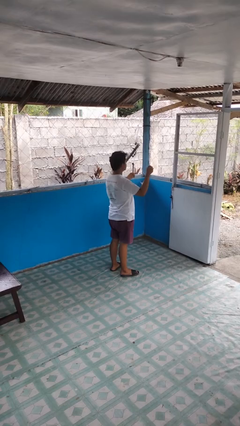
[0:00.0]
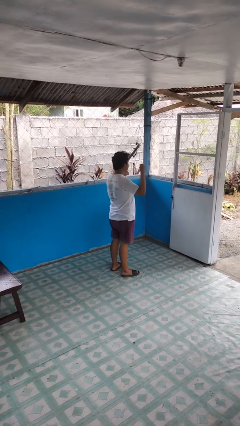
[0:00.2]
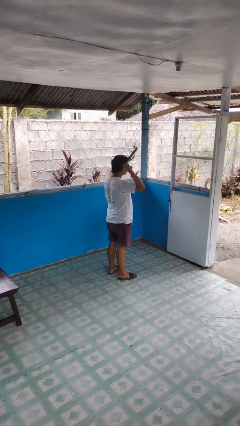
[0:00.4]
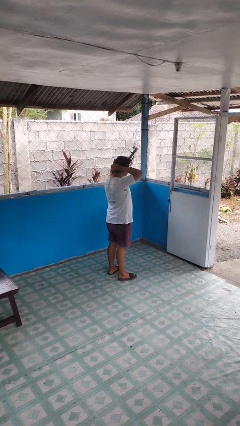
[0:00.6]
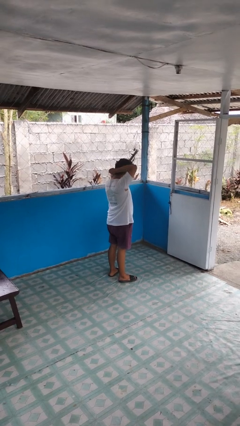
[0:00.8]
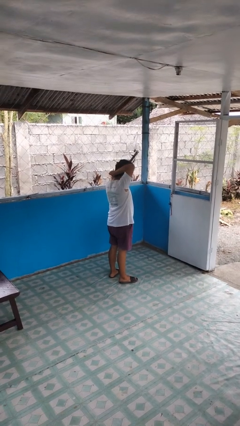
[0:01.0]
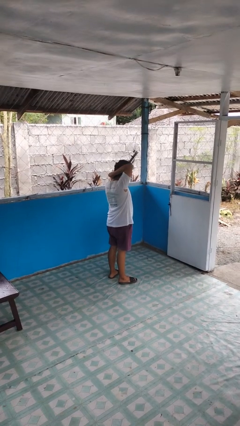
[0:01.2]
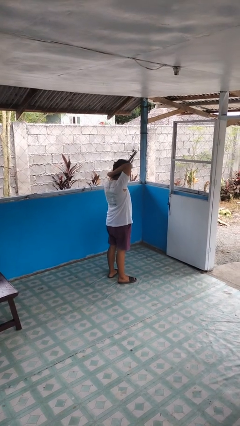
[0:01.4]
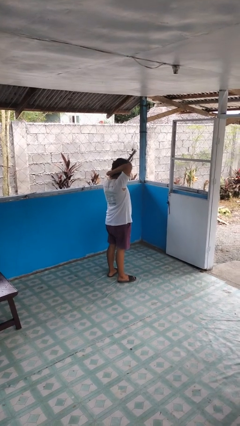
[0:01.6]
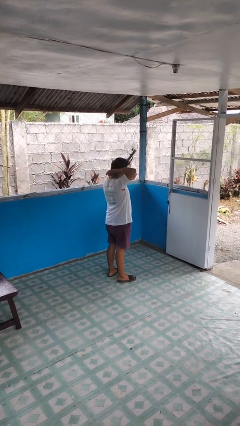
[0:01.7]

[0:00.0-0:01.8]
person puts on necklace

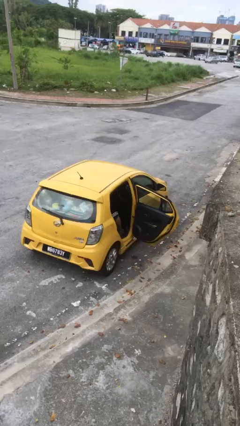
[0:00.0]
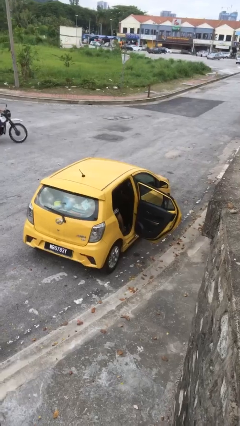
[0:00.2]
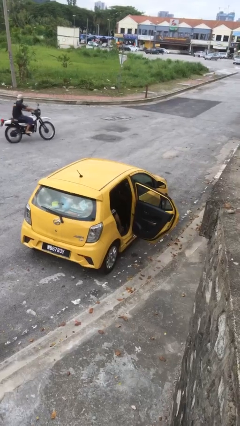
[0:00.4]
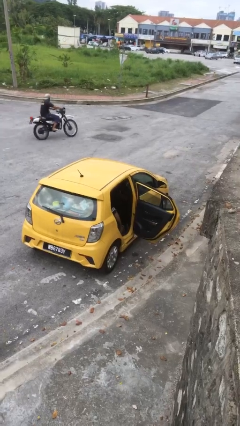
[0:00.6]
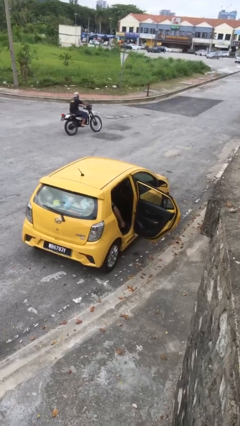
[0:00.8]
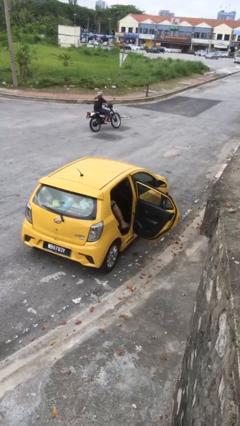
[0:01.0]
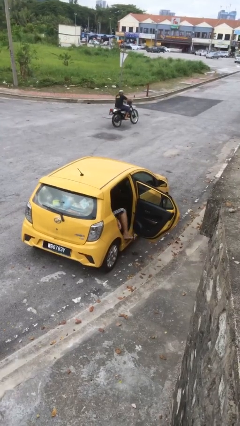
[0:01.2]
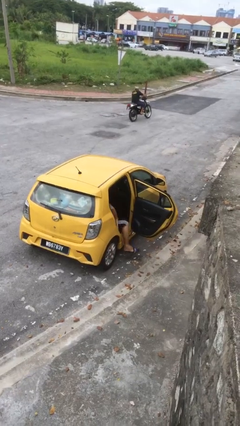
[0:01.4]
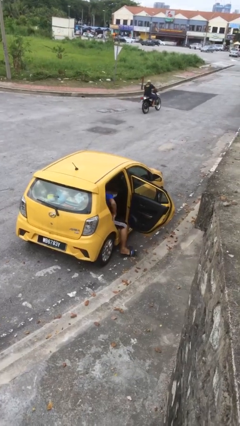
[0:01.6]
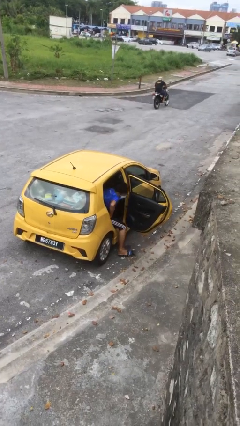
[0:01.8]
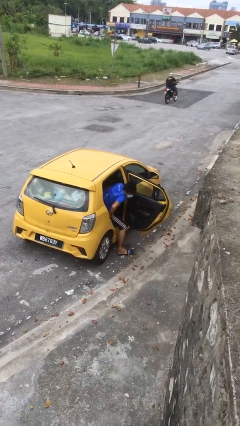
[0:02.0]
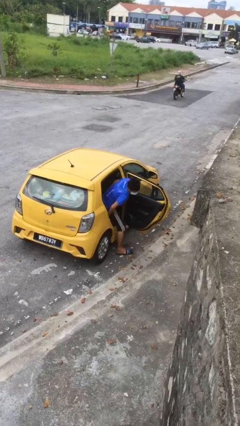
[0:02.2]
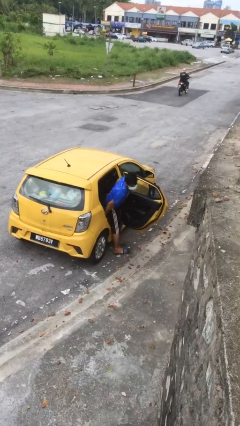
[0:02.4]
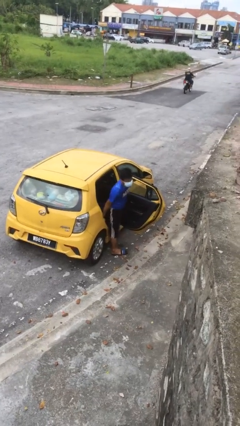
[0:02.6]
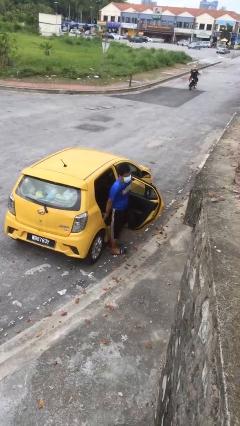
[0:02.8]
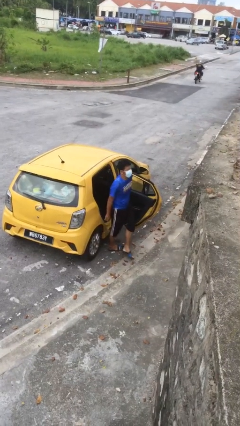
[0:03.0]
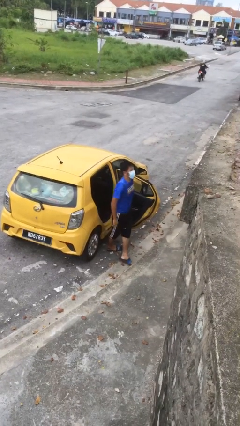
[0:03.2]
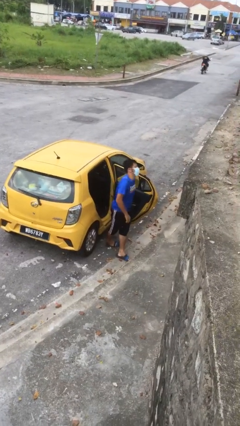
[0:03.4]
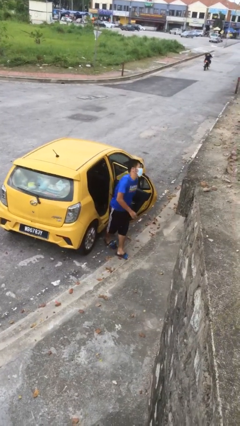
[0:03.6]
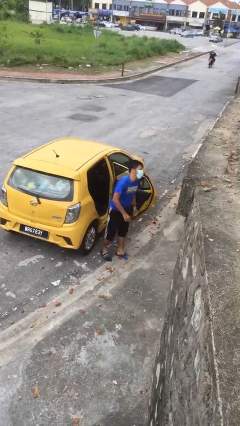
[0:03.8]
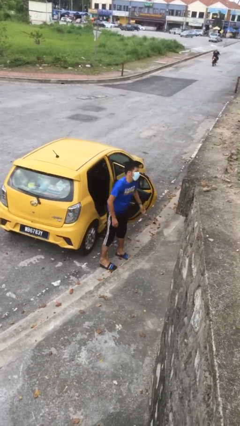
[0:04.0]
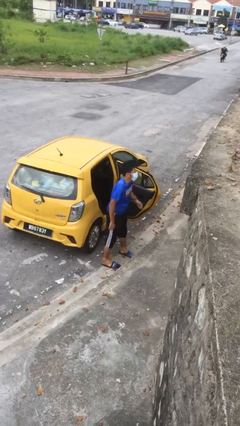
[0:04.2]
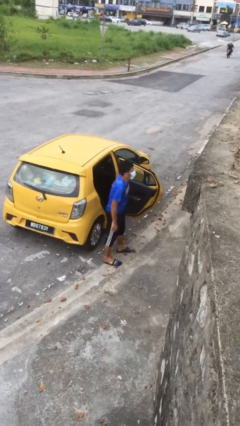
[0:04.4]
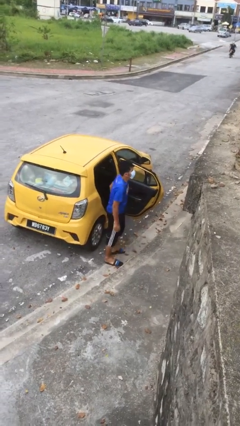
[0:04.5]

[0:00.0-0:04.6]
person exits car

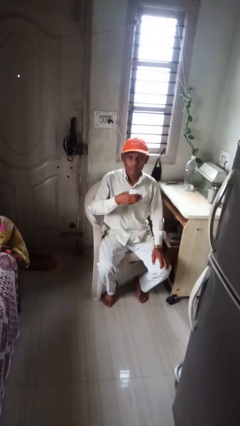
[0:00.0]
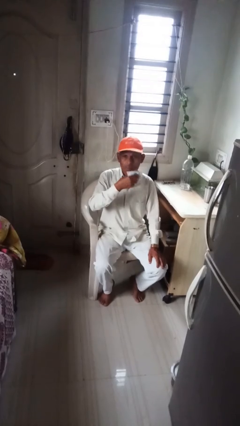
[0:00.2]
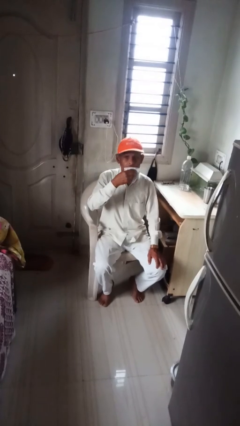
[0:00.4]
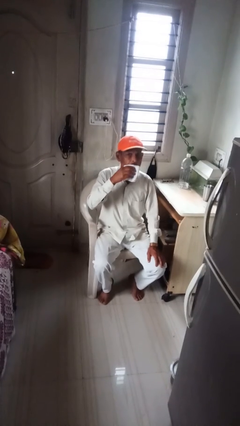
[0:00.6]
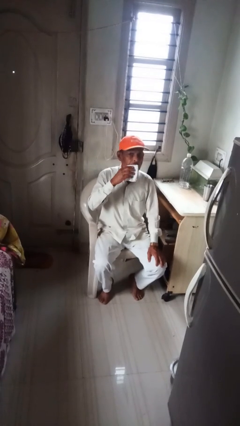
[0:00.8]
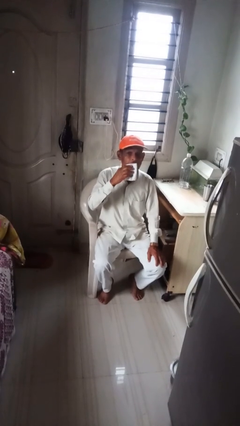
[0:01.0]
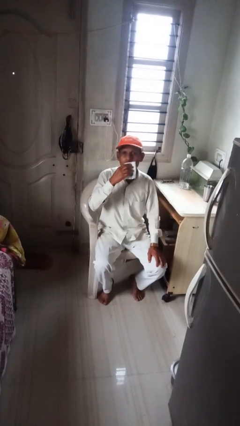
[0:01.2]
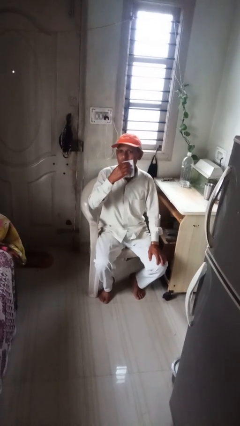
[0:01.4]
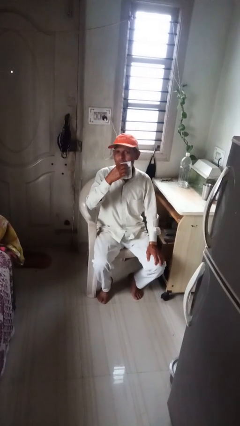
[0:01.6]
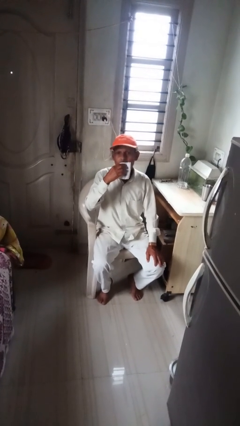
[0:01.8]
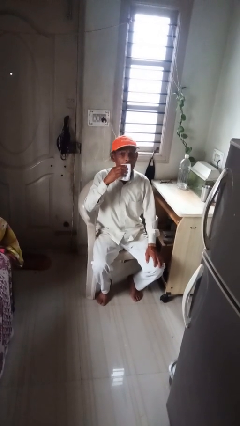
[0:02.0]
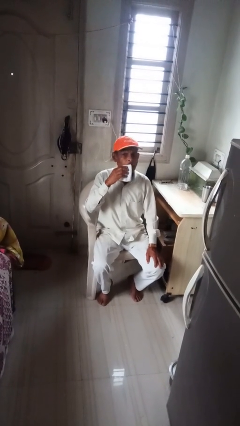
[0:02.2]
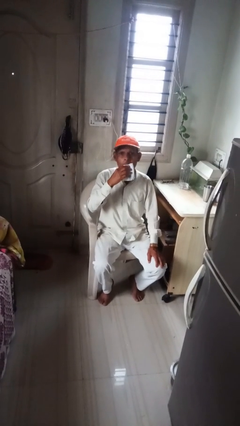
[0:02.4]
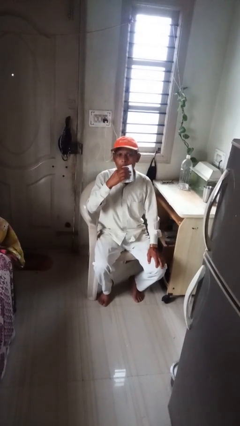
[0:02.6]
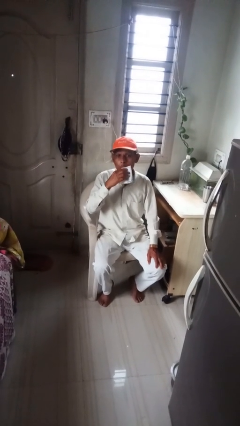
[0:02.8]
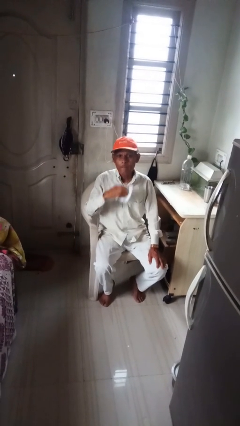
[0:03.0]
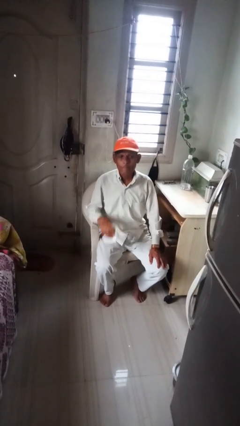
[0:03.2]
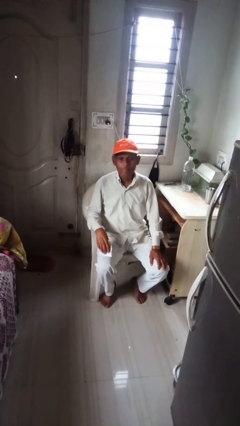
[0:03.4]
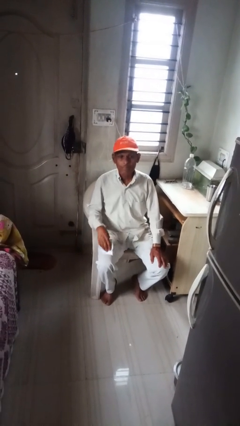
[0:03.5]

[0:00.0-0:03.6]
person wipes mouth with napkin

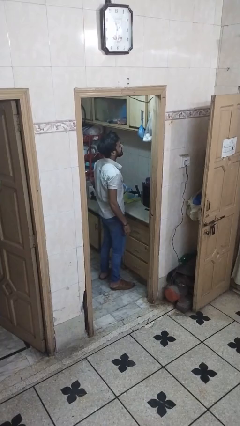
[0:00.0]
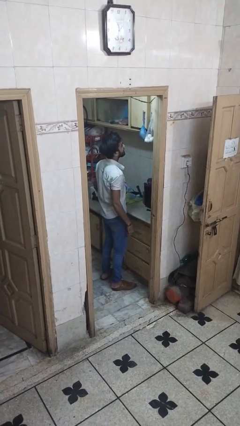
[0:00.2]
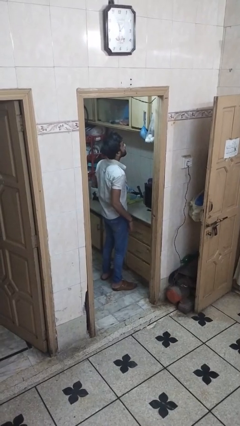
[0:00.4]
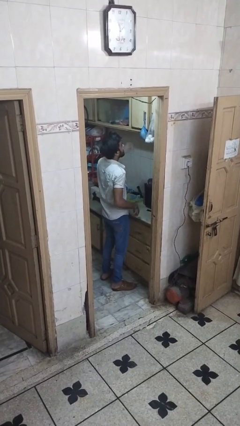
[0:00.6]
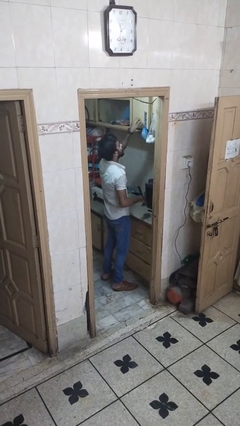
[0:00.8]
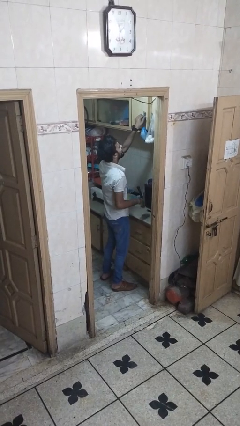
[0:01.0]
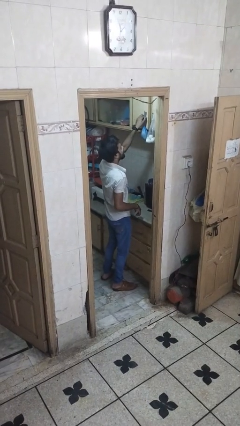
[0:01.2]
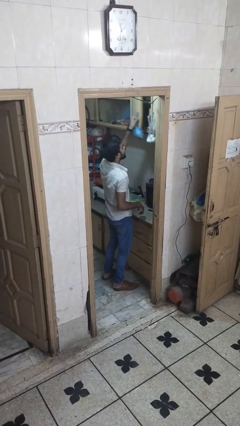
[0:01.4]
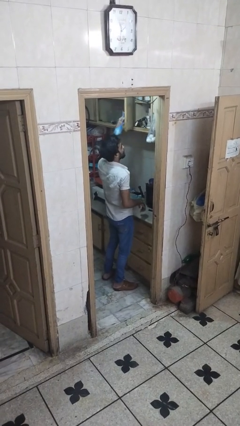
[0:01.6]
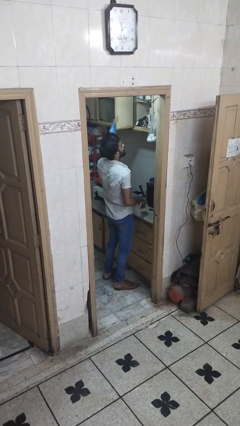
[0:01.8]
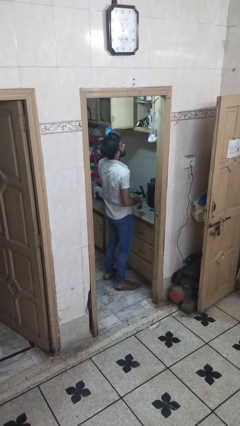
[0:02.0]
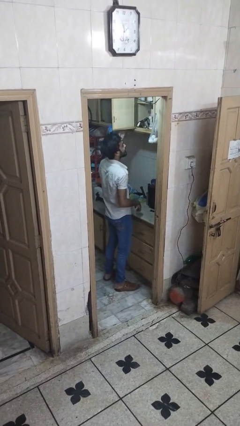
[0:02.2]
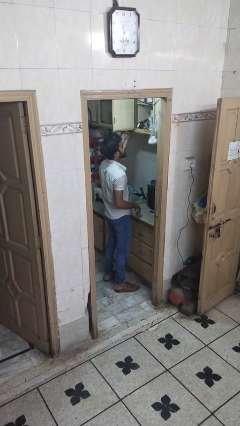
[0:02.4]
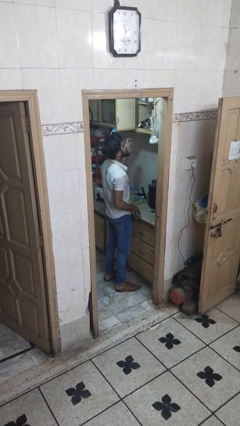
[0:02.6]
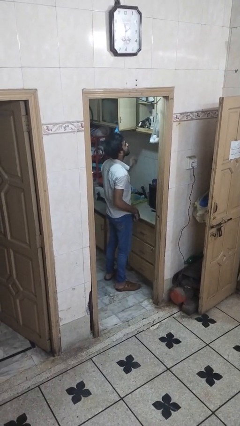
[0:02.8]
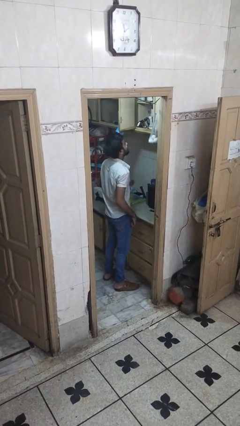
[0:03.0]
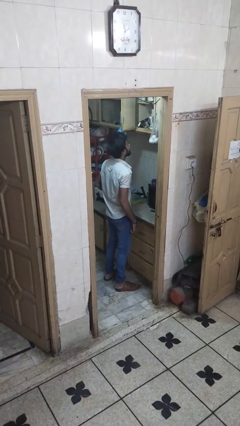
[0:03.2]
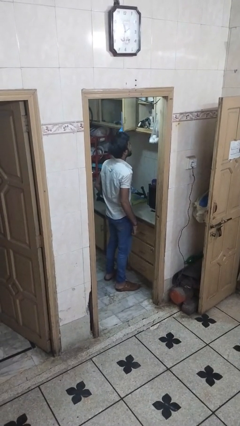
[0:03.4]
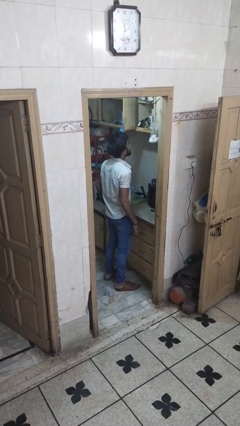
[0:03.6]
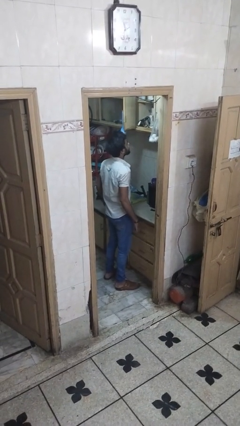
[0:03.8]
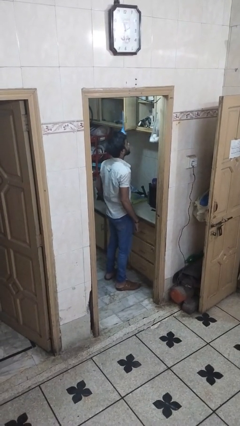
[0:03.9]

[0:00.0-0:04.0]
person opens cabinet

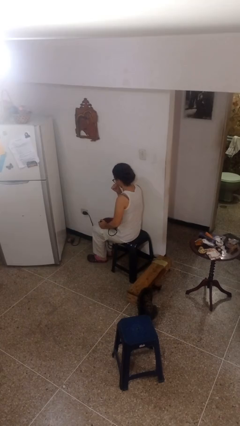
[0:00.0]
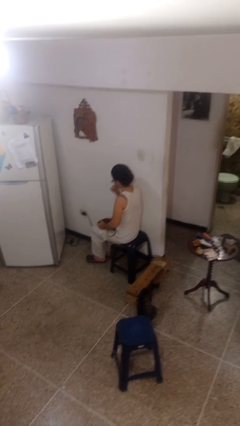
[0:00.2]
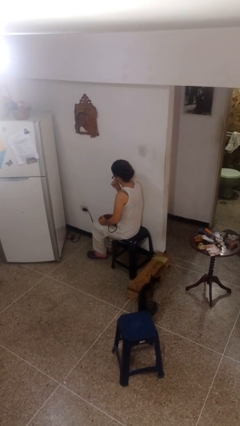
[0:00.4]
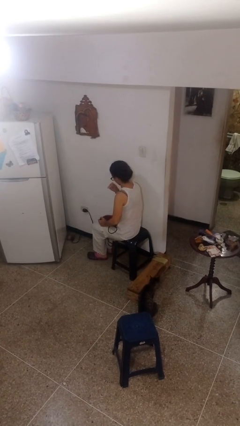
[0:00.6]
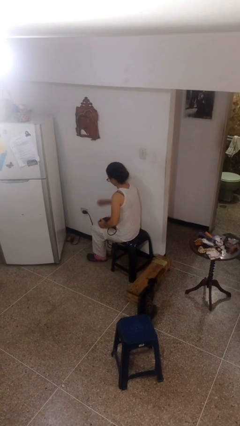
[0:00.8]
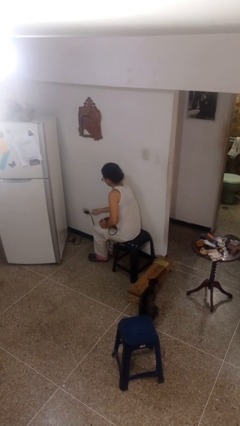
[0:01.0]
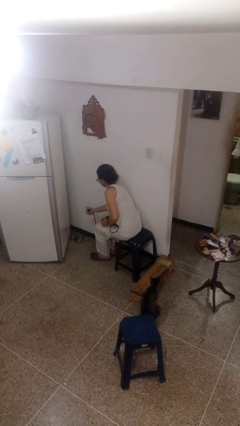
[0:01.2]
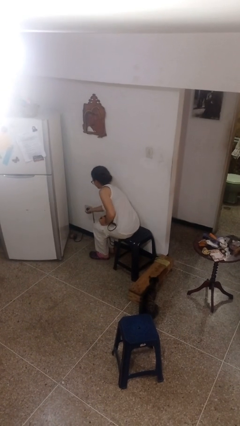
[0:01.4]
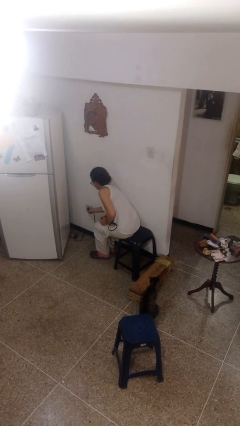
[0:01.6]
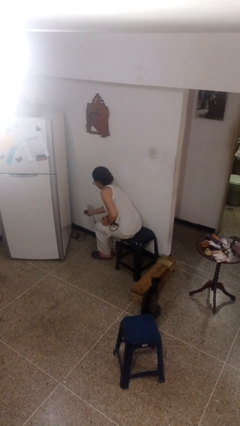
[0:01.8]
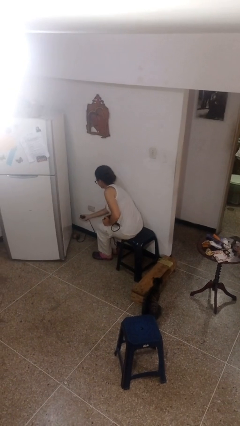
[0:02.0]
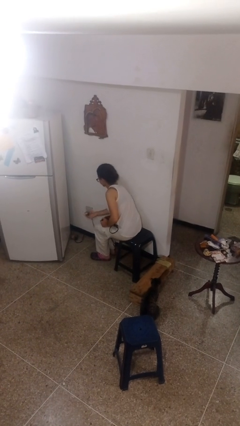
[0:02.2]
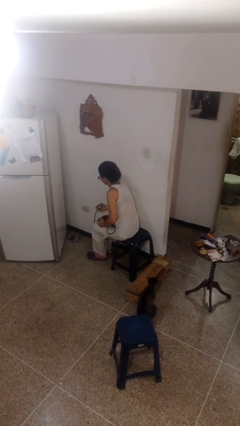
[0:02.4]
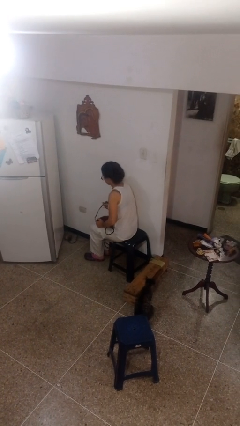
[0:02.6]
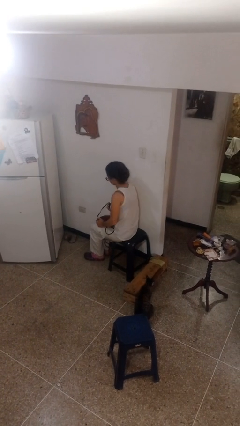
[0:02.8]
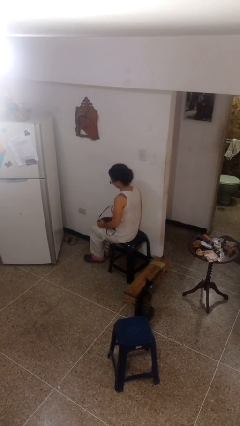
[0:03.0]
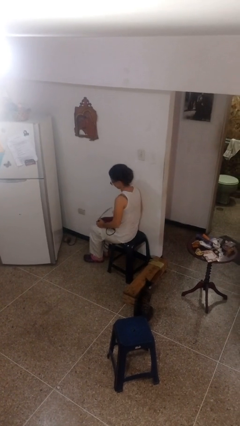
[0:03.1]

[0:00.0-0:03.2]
person unplugs from electrical socket
